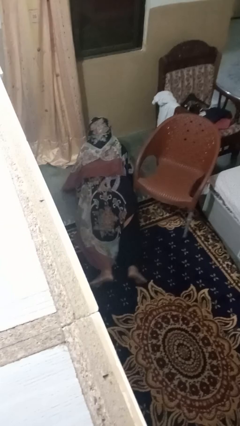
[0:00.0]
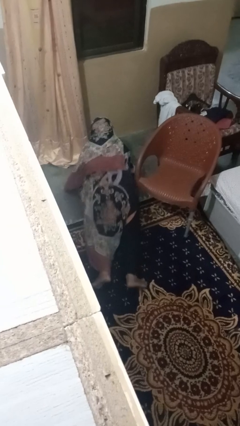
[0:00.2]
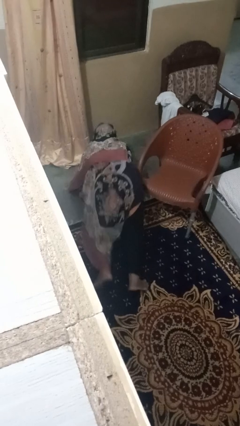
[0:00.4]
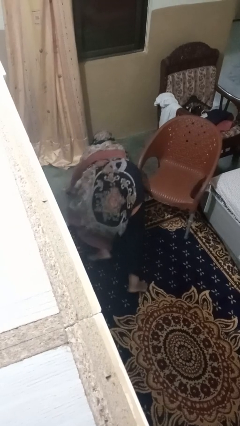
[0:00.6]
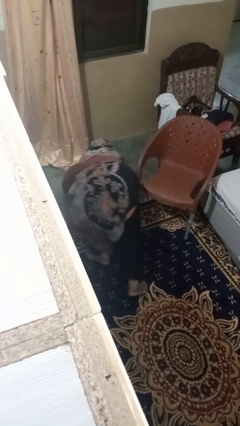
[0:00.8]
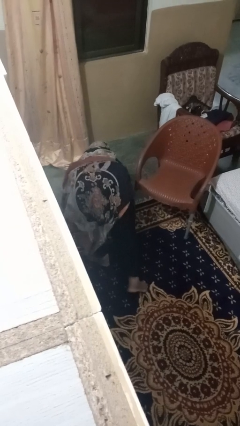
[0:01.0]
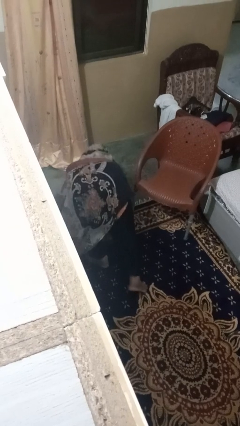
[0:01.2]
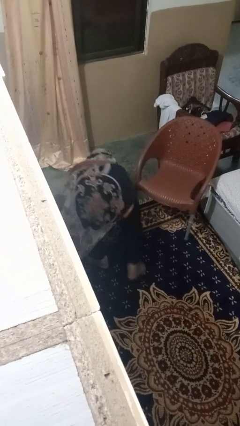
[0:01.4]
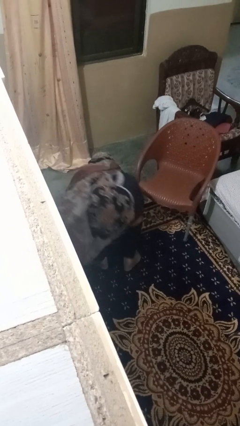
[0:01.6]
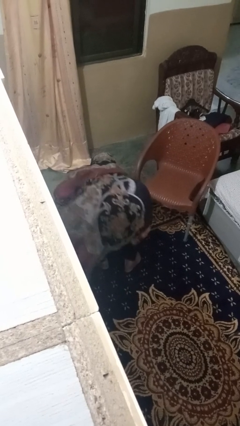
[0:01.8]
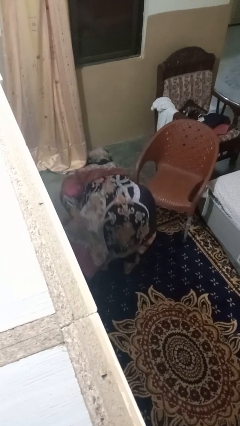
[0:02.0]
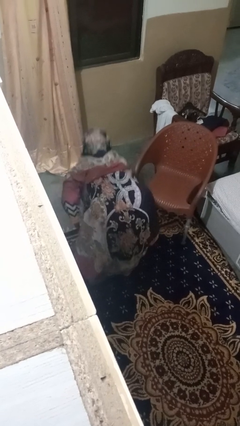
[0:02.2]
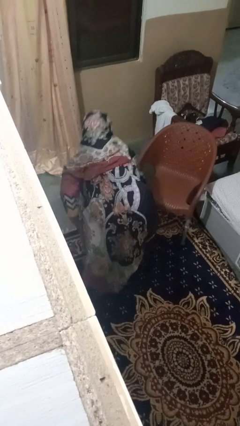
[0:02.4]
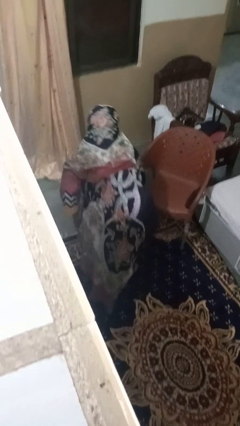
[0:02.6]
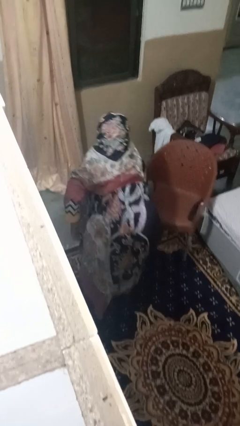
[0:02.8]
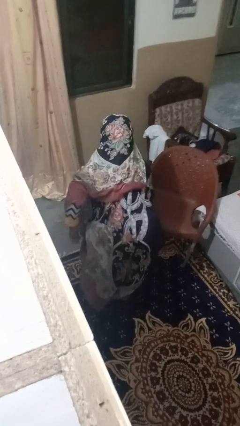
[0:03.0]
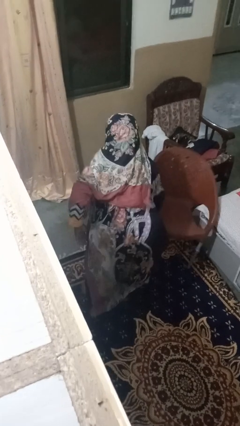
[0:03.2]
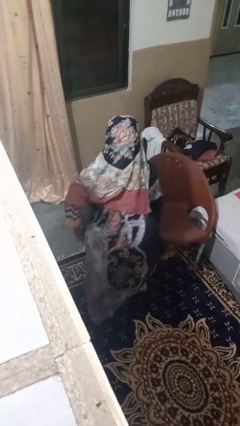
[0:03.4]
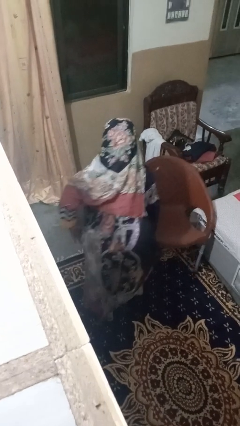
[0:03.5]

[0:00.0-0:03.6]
person stands up from floor

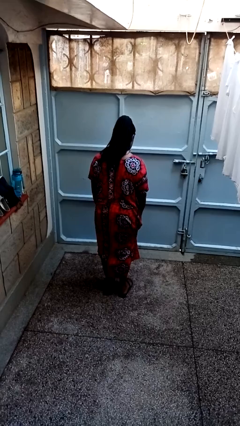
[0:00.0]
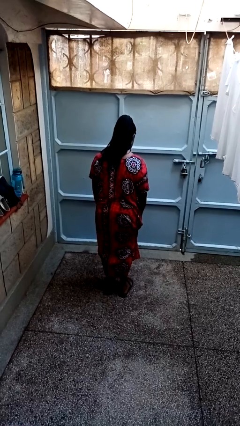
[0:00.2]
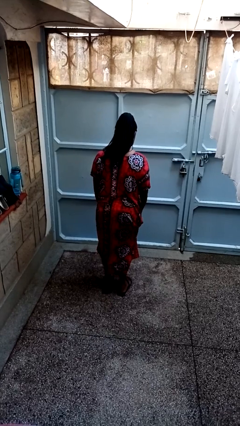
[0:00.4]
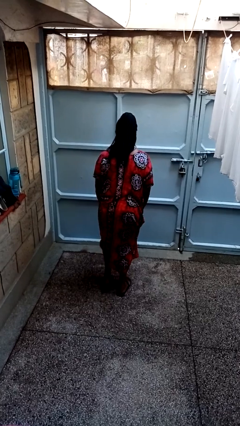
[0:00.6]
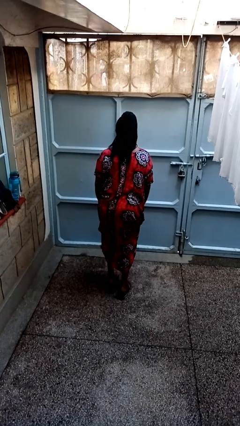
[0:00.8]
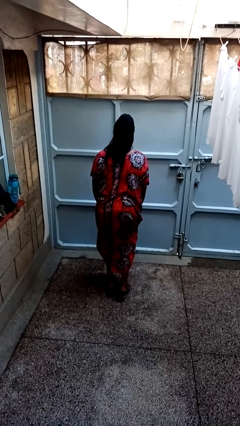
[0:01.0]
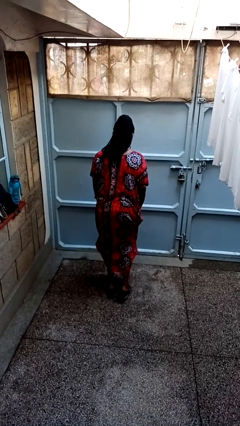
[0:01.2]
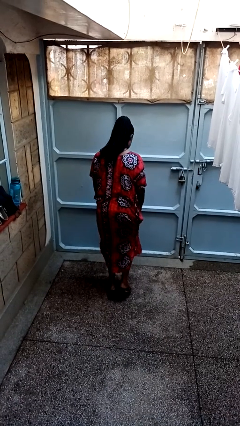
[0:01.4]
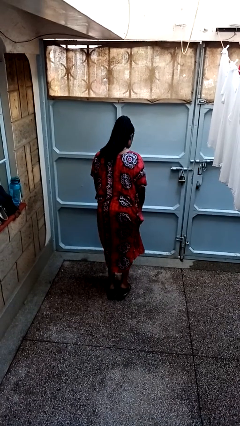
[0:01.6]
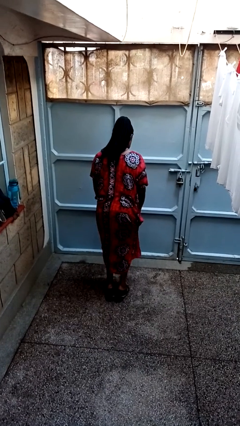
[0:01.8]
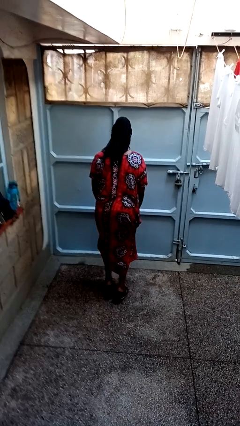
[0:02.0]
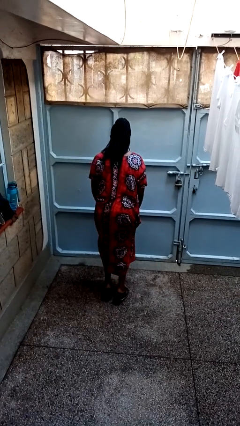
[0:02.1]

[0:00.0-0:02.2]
person walks tiptoe

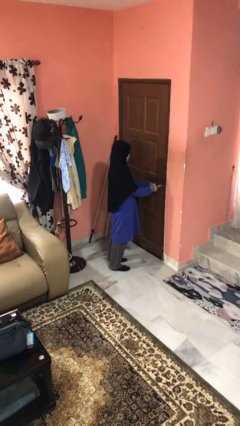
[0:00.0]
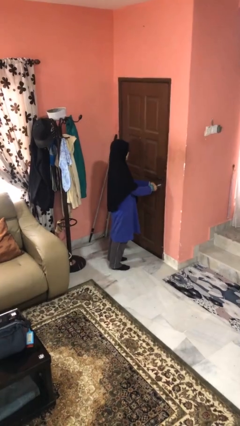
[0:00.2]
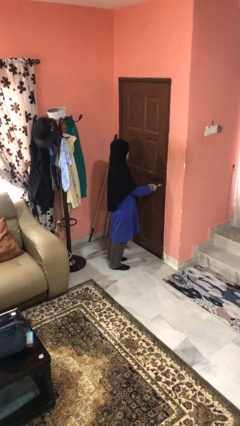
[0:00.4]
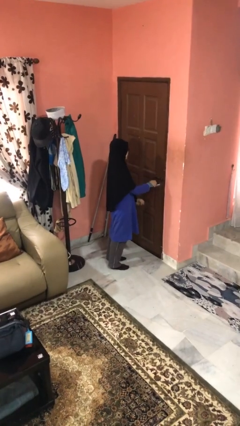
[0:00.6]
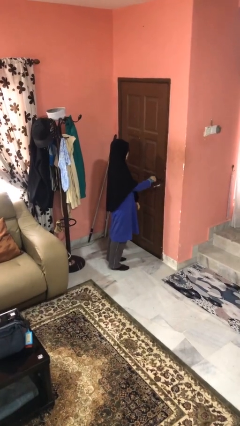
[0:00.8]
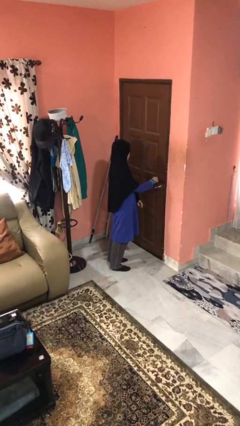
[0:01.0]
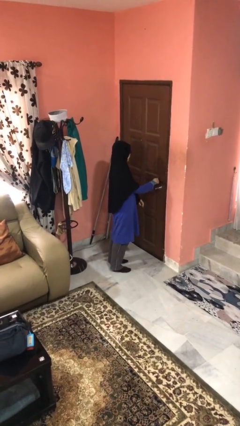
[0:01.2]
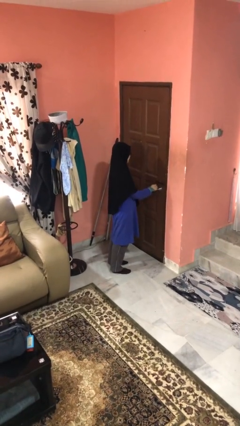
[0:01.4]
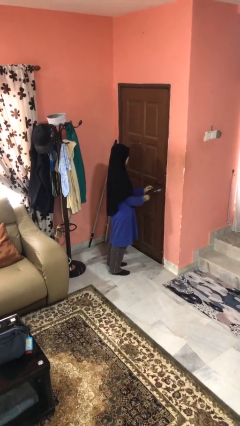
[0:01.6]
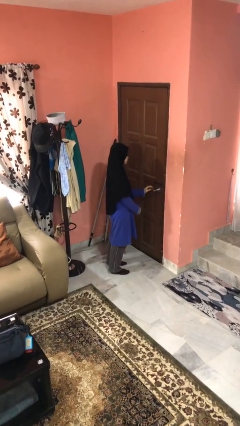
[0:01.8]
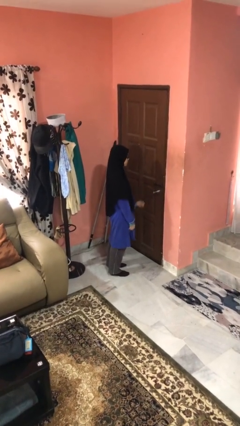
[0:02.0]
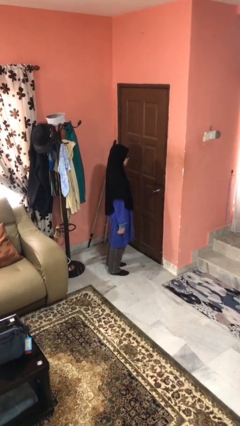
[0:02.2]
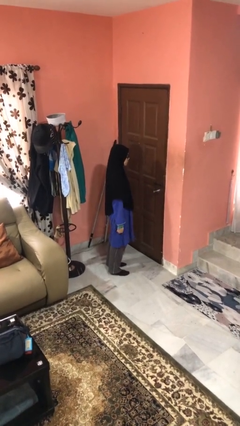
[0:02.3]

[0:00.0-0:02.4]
person locks door with keys

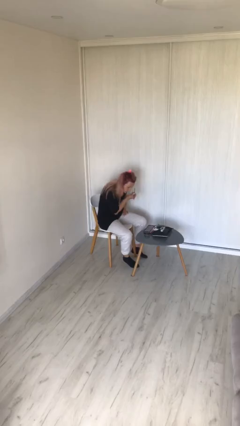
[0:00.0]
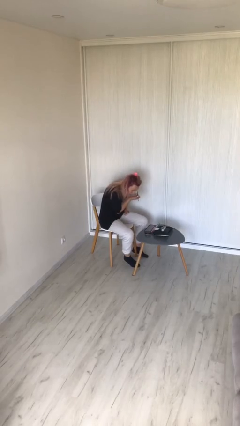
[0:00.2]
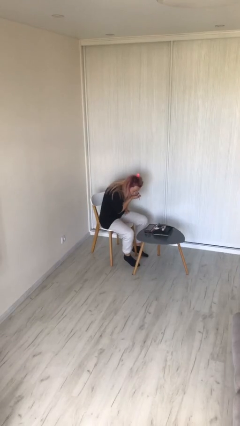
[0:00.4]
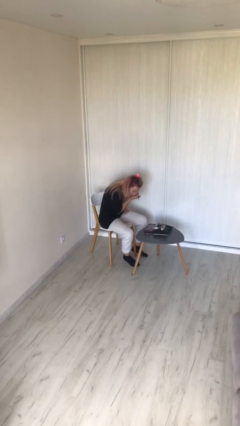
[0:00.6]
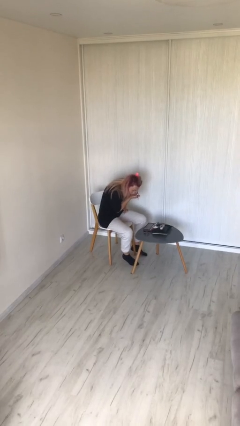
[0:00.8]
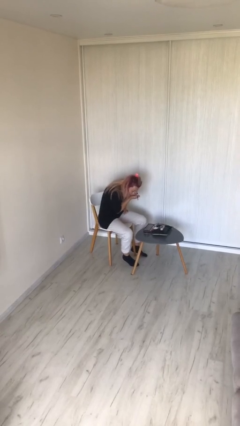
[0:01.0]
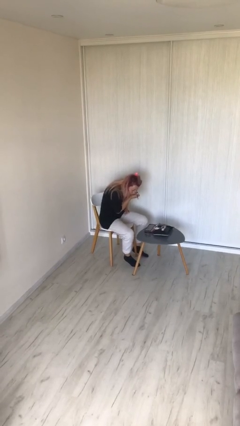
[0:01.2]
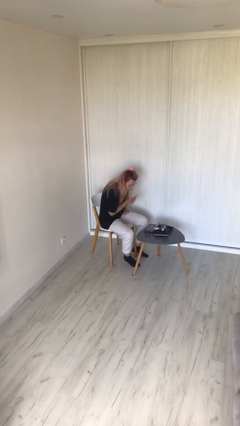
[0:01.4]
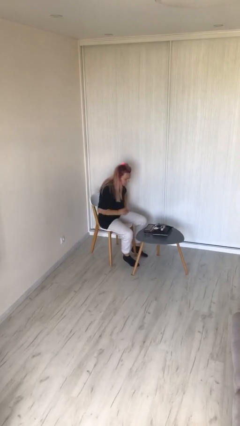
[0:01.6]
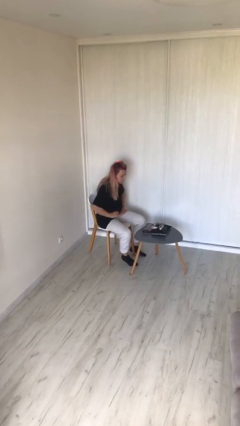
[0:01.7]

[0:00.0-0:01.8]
person applies eye makeup

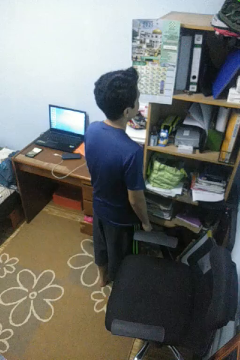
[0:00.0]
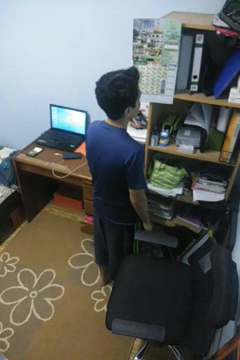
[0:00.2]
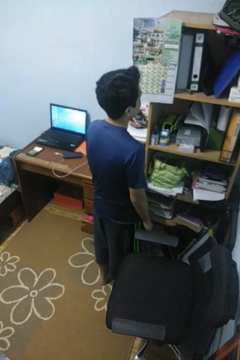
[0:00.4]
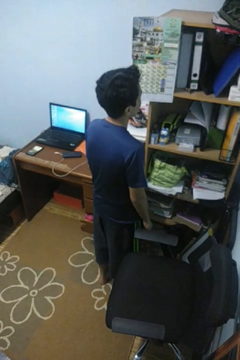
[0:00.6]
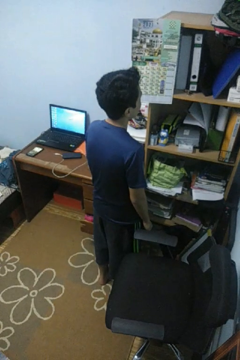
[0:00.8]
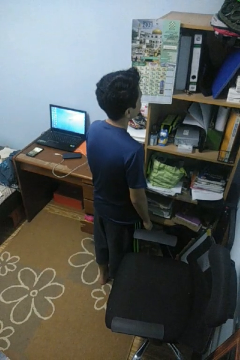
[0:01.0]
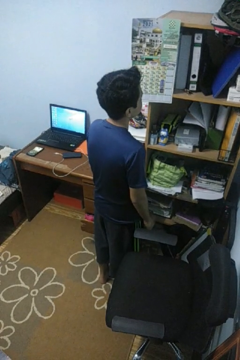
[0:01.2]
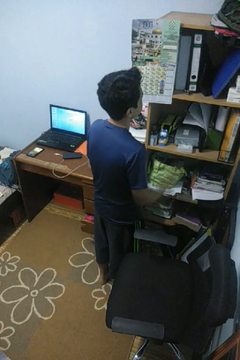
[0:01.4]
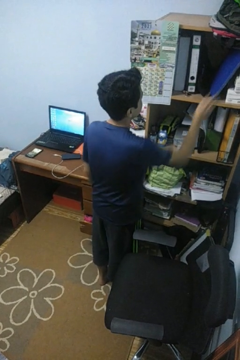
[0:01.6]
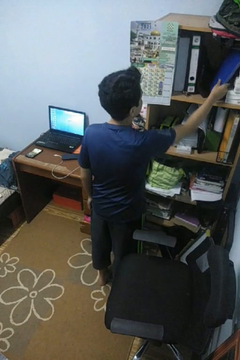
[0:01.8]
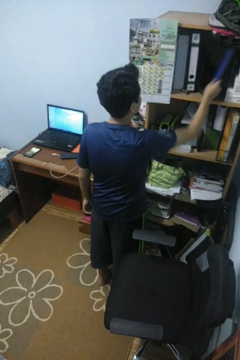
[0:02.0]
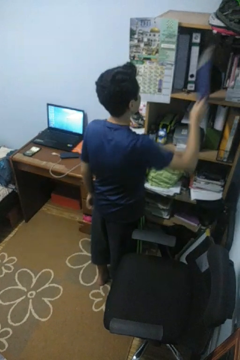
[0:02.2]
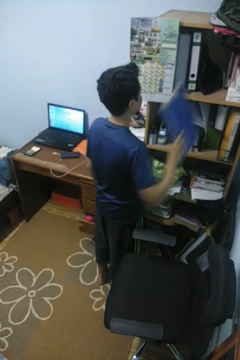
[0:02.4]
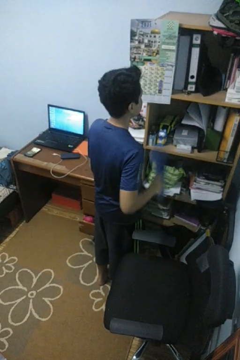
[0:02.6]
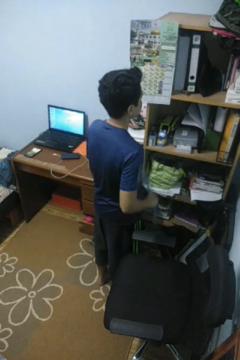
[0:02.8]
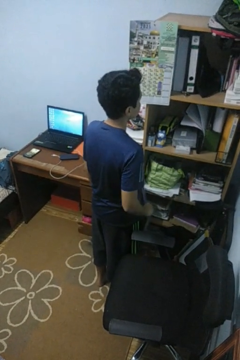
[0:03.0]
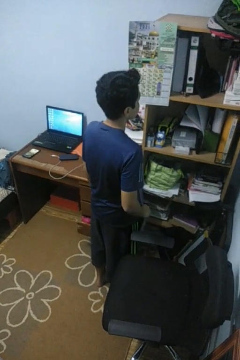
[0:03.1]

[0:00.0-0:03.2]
person picks up object from cabinet

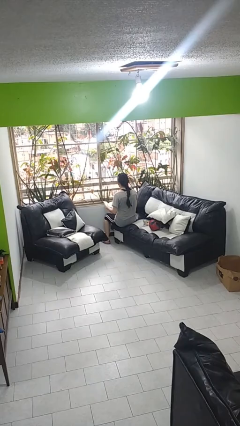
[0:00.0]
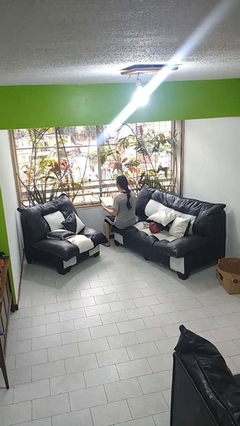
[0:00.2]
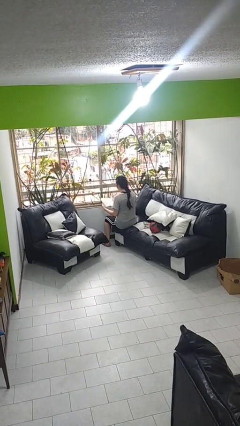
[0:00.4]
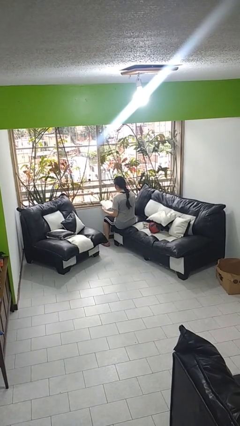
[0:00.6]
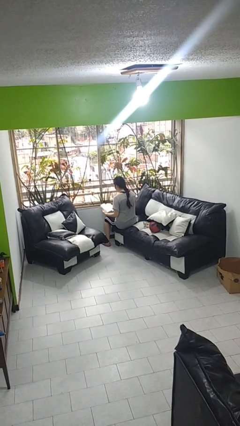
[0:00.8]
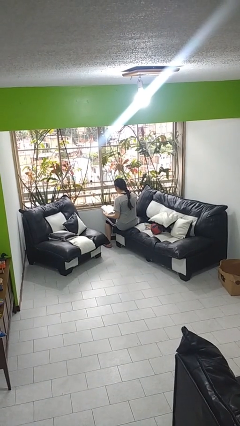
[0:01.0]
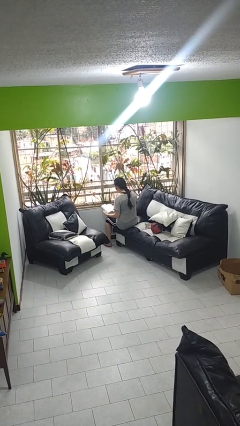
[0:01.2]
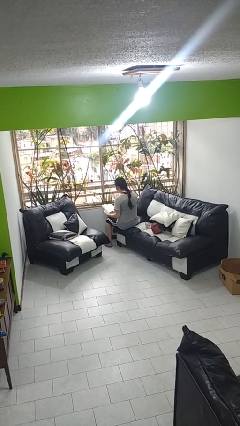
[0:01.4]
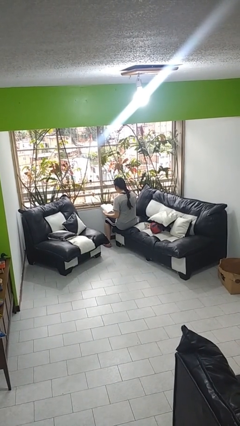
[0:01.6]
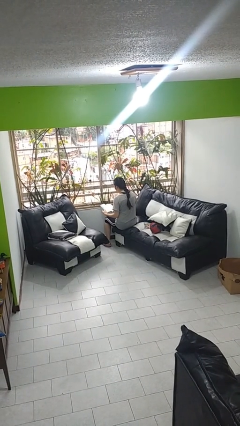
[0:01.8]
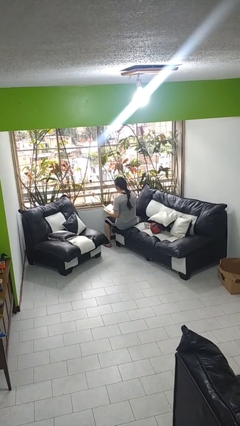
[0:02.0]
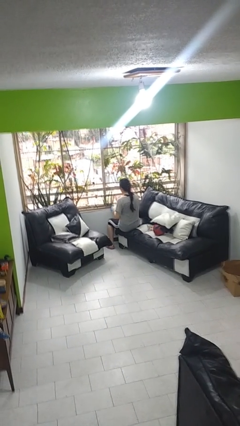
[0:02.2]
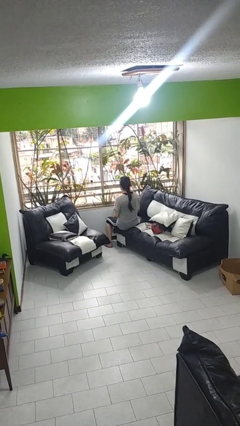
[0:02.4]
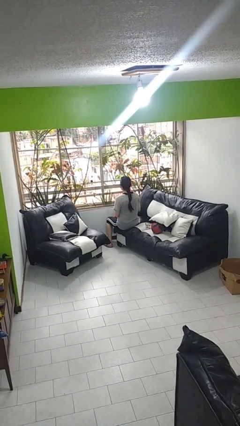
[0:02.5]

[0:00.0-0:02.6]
person reads book

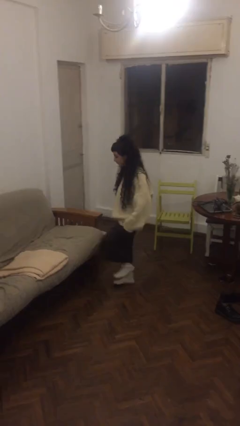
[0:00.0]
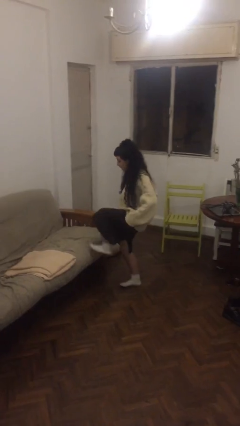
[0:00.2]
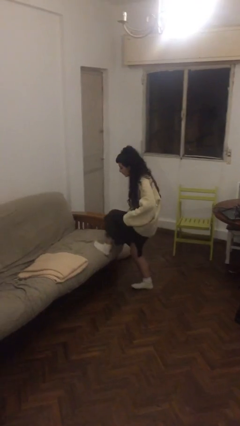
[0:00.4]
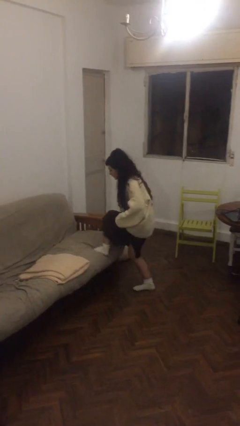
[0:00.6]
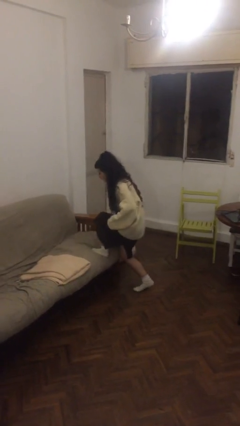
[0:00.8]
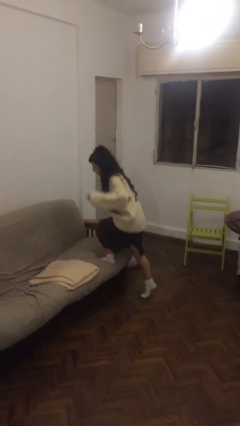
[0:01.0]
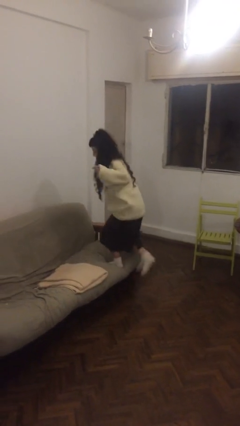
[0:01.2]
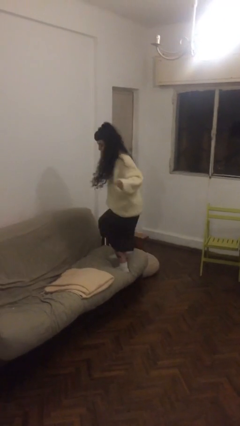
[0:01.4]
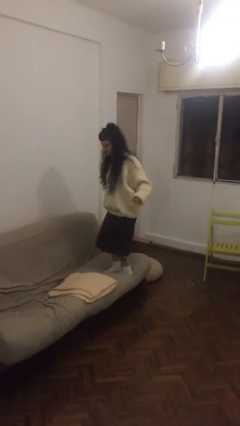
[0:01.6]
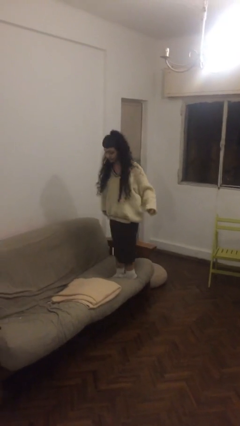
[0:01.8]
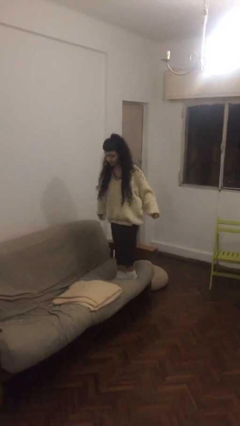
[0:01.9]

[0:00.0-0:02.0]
person climbs on couch
